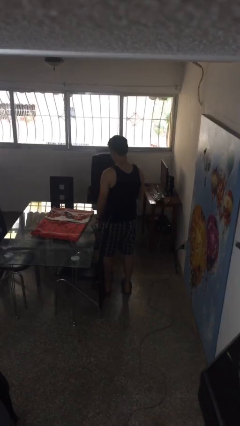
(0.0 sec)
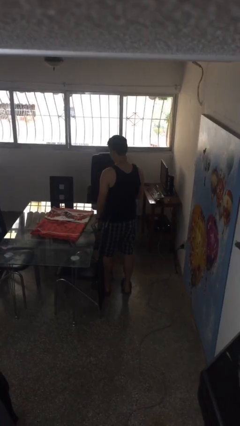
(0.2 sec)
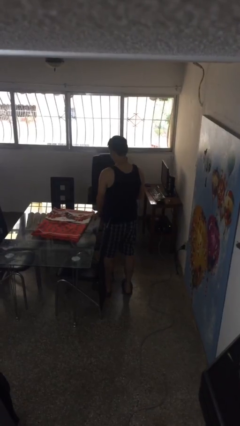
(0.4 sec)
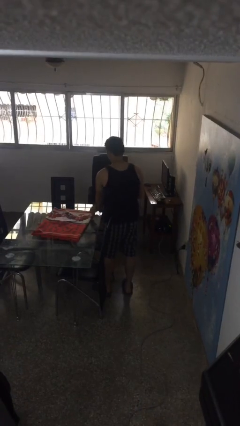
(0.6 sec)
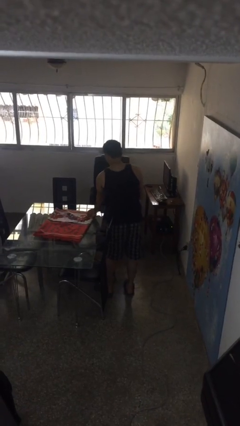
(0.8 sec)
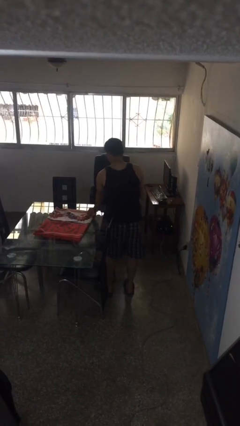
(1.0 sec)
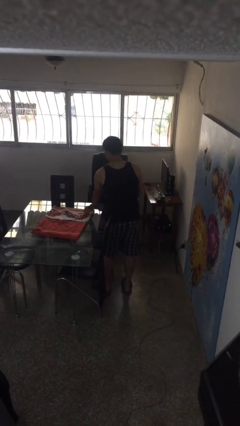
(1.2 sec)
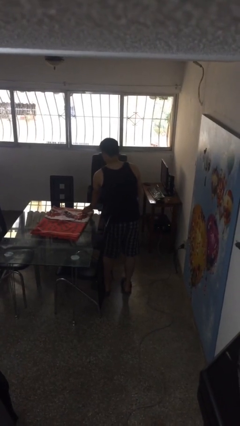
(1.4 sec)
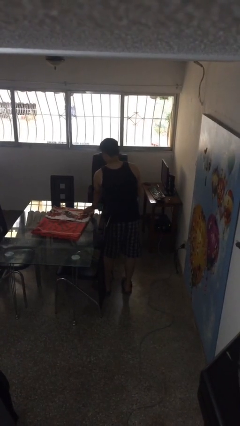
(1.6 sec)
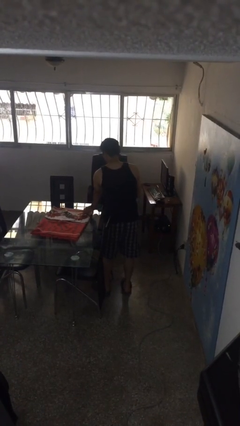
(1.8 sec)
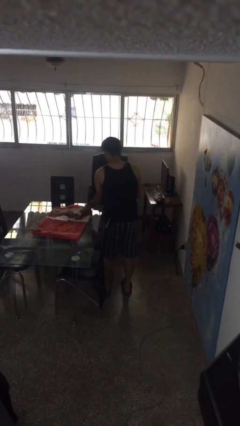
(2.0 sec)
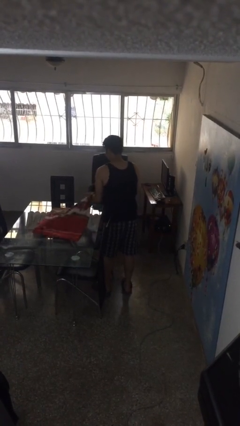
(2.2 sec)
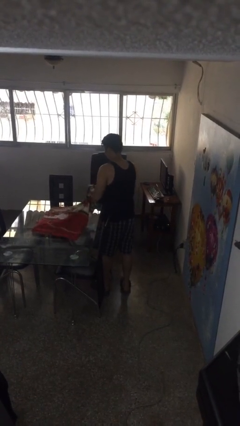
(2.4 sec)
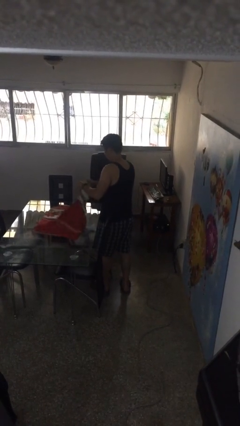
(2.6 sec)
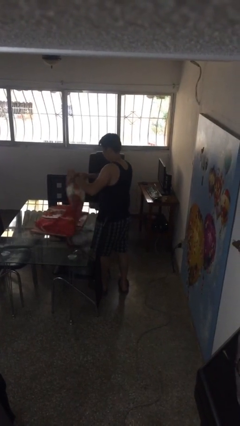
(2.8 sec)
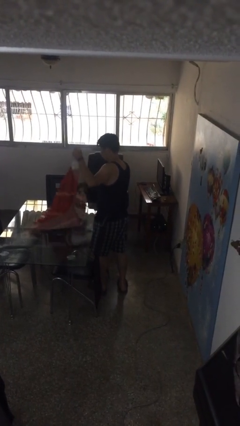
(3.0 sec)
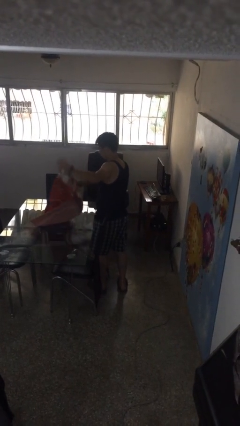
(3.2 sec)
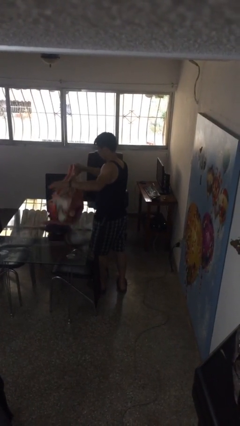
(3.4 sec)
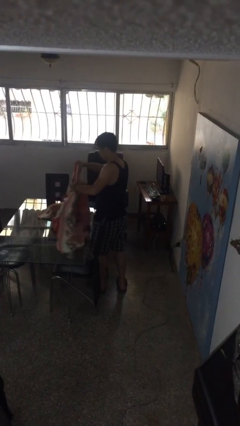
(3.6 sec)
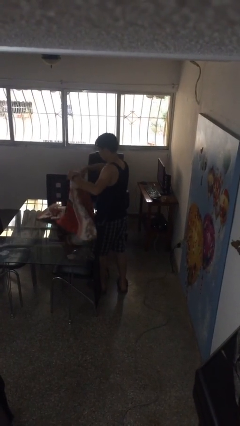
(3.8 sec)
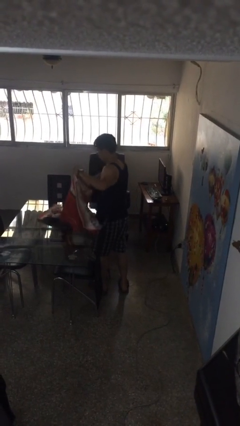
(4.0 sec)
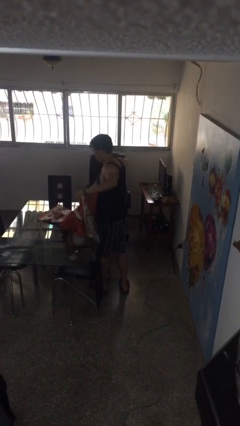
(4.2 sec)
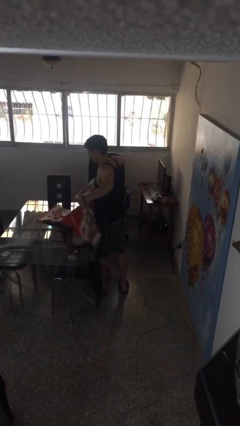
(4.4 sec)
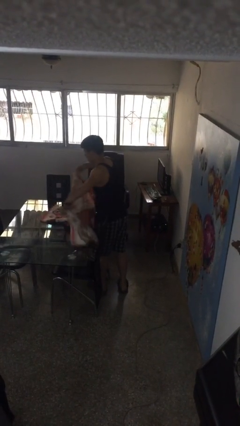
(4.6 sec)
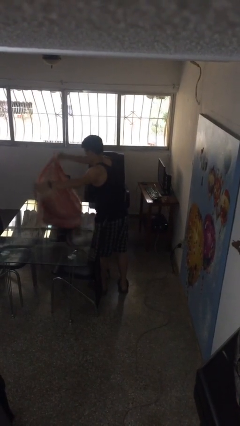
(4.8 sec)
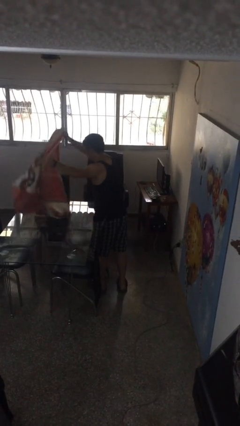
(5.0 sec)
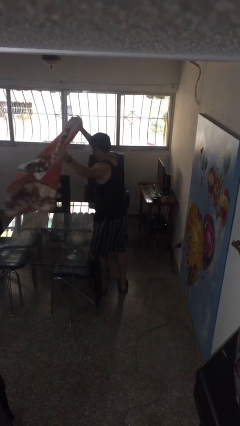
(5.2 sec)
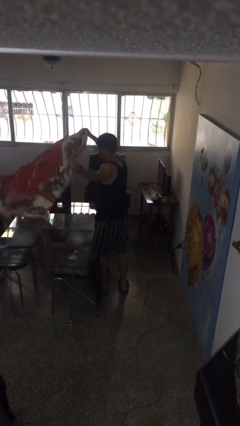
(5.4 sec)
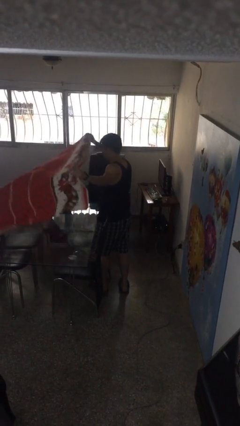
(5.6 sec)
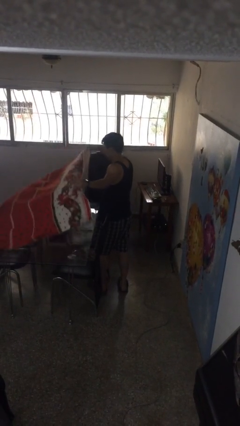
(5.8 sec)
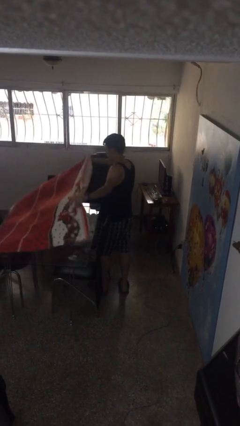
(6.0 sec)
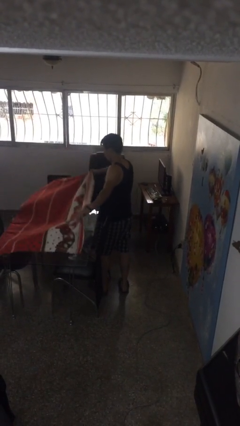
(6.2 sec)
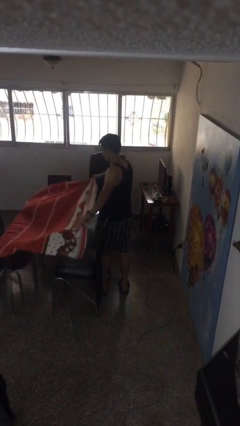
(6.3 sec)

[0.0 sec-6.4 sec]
person spreads tablecloth

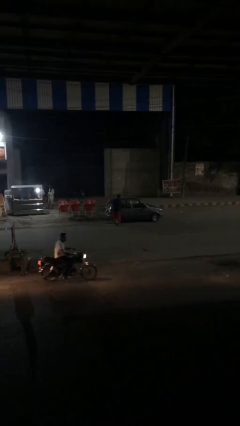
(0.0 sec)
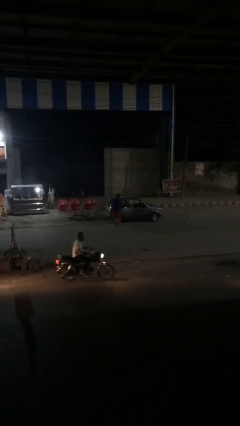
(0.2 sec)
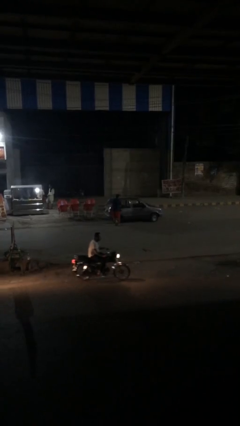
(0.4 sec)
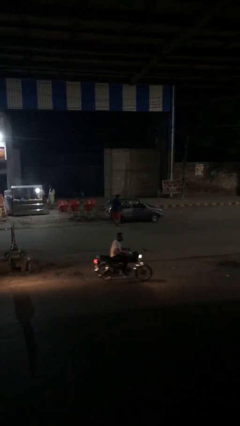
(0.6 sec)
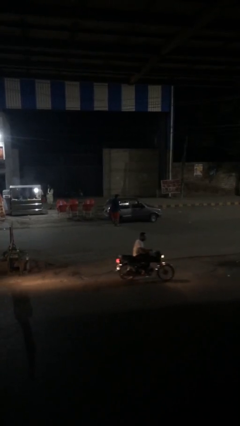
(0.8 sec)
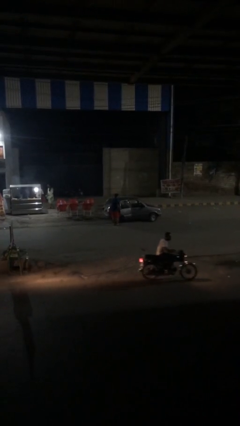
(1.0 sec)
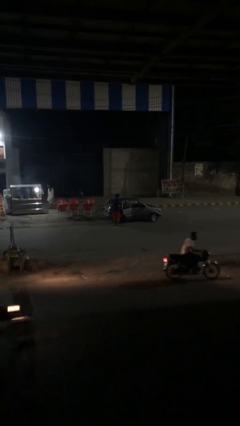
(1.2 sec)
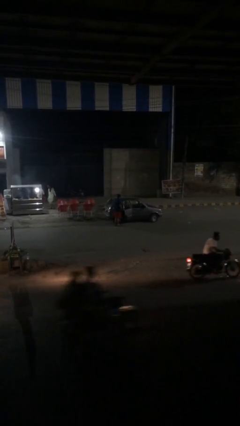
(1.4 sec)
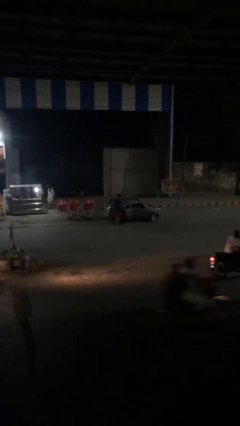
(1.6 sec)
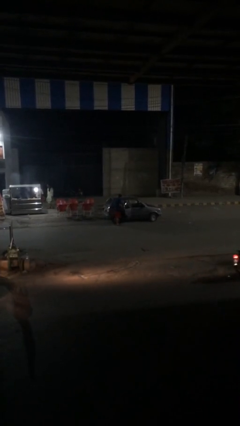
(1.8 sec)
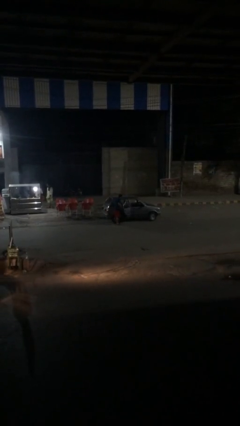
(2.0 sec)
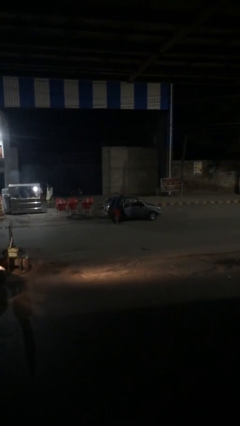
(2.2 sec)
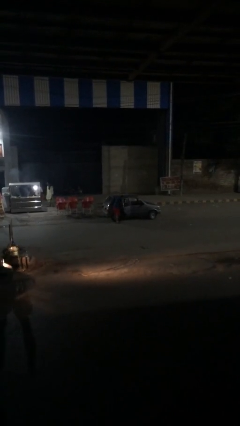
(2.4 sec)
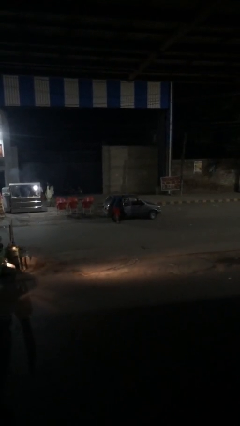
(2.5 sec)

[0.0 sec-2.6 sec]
person opens car door

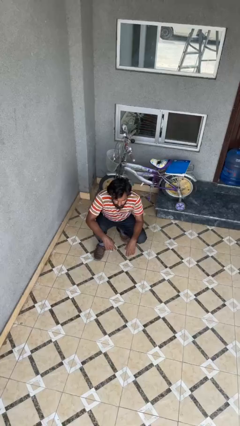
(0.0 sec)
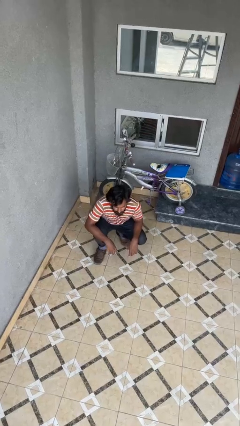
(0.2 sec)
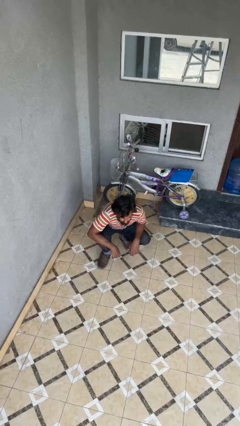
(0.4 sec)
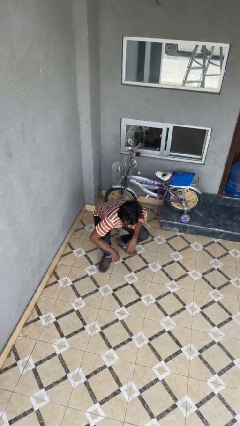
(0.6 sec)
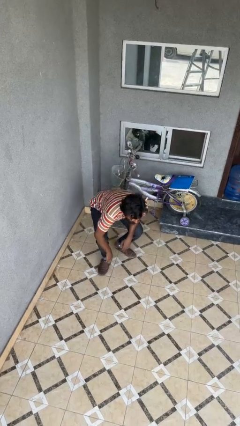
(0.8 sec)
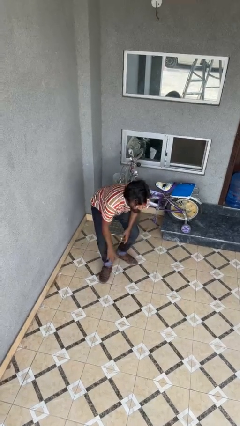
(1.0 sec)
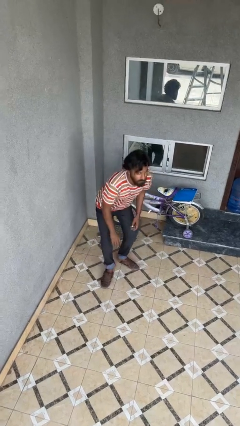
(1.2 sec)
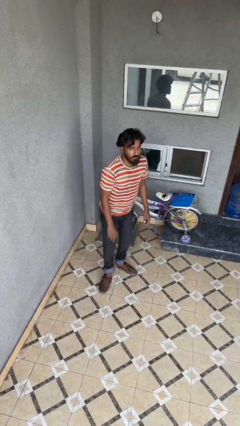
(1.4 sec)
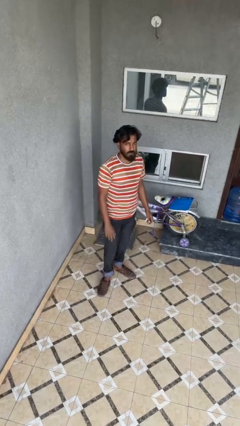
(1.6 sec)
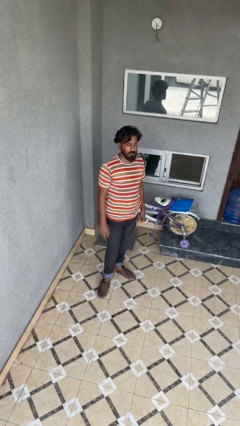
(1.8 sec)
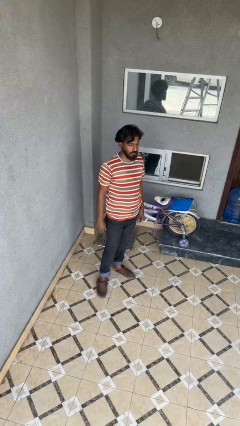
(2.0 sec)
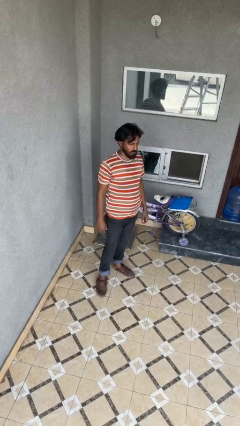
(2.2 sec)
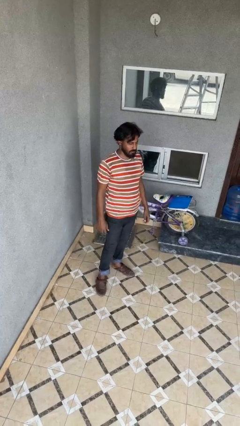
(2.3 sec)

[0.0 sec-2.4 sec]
person stands up

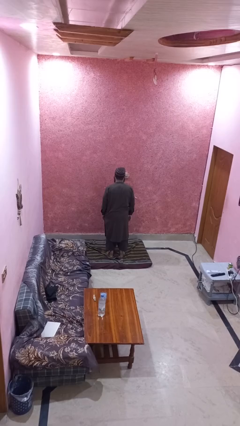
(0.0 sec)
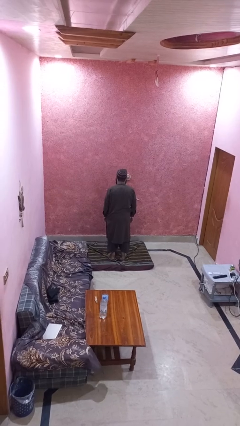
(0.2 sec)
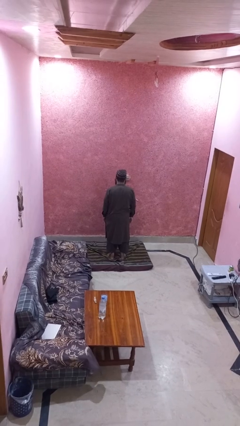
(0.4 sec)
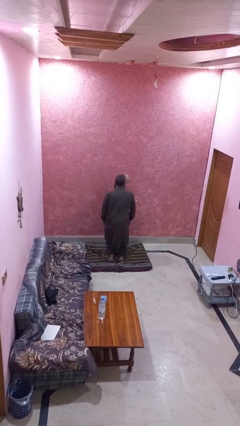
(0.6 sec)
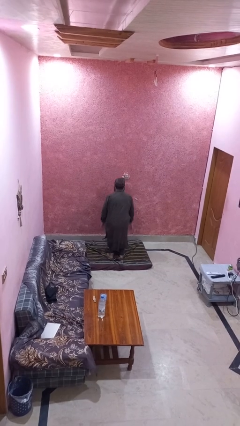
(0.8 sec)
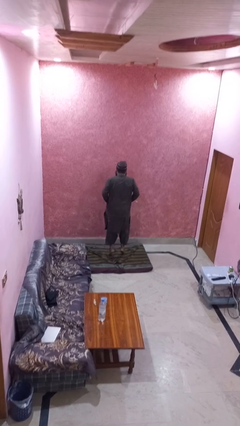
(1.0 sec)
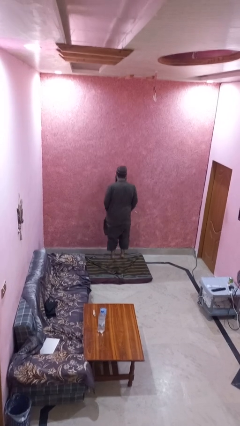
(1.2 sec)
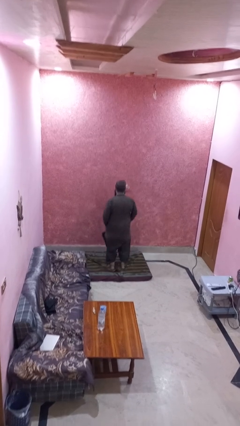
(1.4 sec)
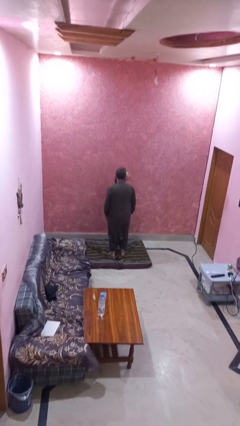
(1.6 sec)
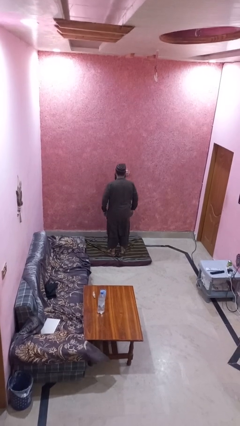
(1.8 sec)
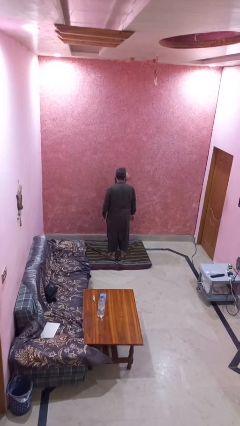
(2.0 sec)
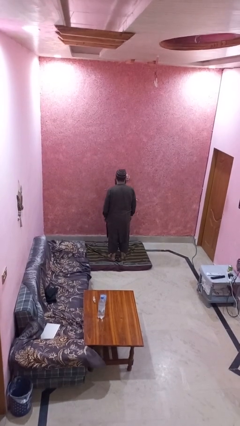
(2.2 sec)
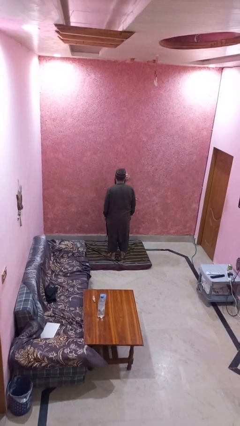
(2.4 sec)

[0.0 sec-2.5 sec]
person jumps

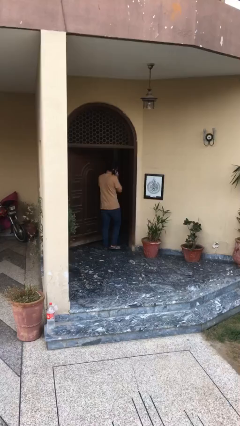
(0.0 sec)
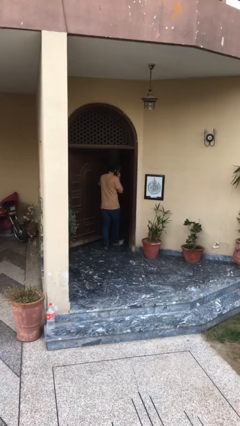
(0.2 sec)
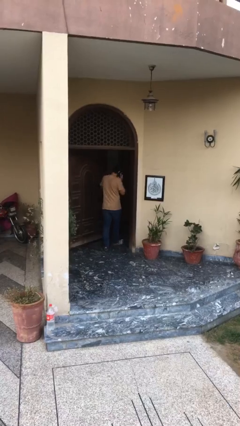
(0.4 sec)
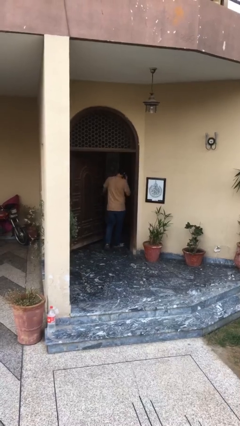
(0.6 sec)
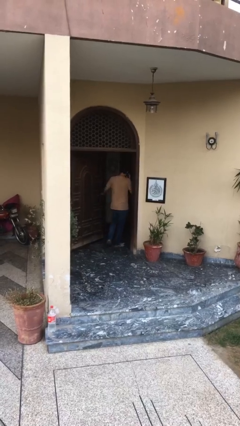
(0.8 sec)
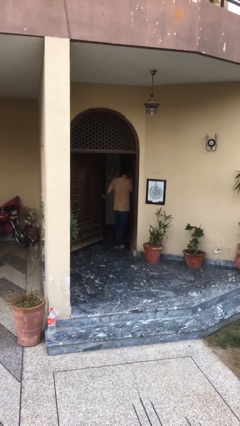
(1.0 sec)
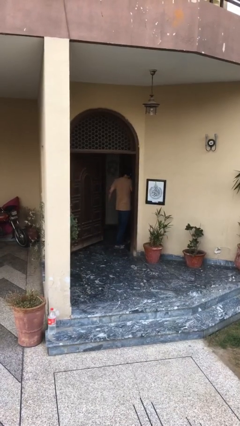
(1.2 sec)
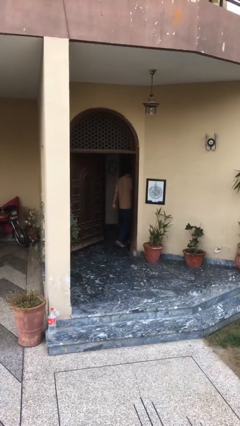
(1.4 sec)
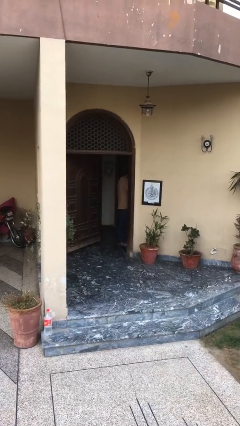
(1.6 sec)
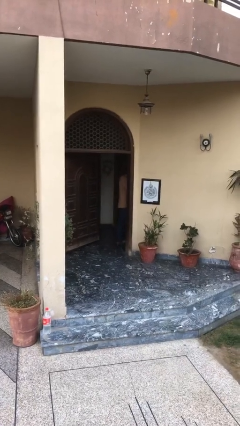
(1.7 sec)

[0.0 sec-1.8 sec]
person exits scene through structure

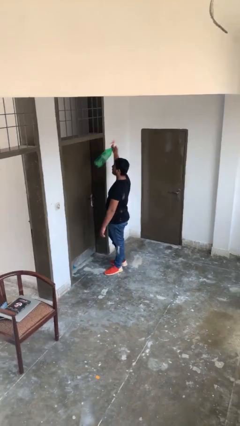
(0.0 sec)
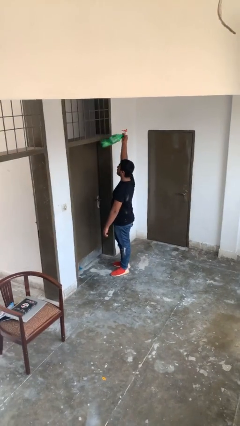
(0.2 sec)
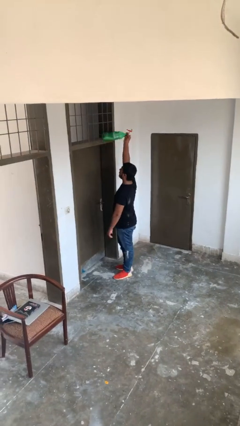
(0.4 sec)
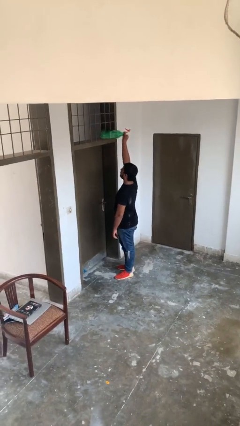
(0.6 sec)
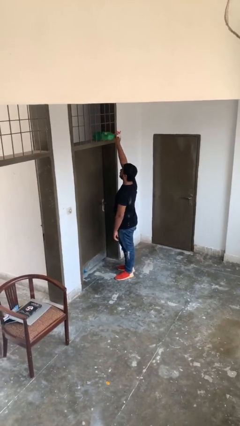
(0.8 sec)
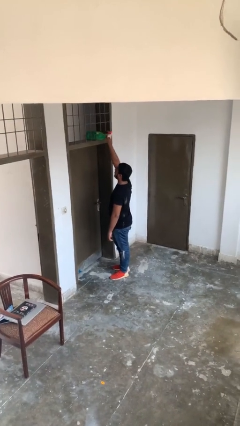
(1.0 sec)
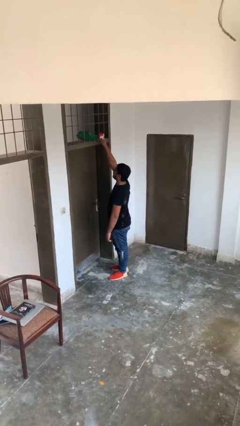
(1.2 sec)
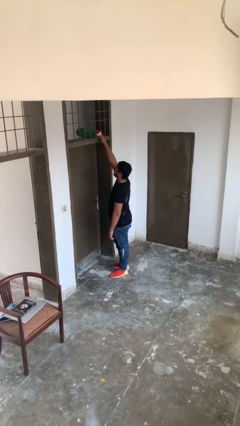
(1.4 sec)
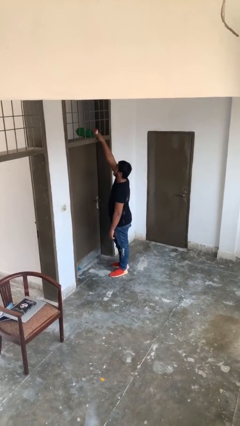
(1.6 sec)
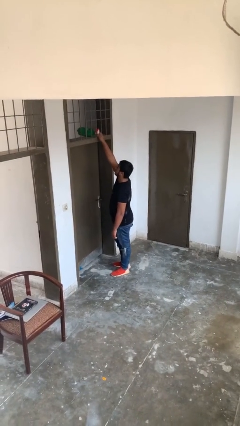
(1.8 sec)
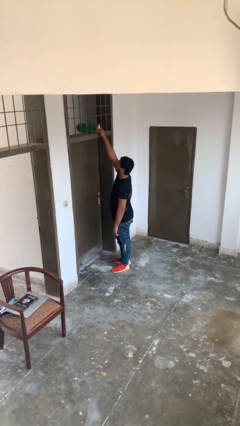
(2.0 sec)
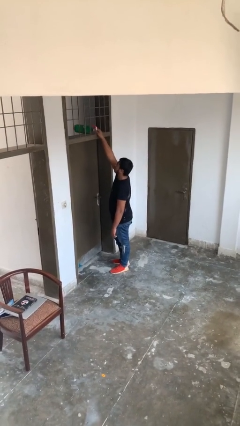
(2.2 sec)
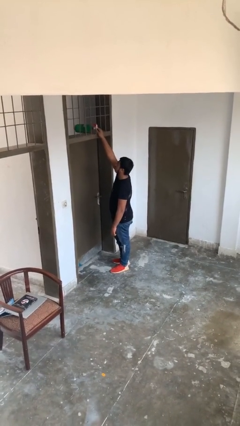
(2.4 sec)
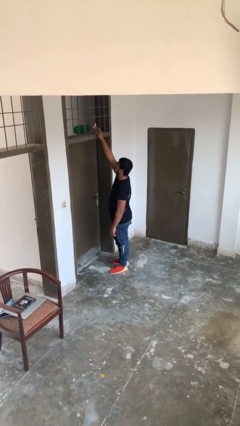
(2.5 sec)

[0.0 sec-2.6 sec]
person puts down object on shelf
